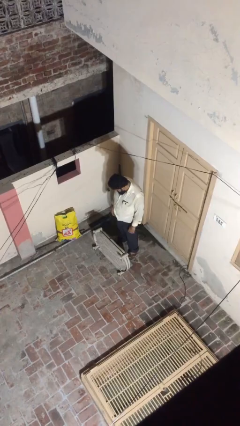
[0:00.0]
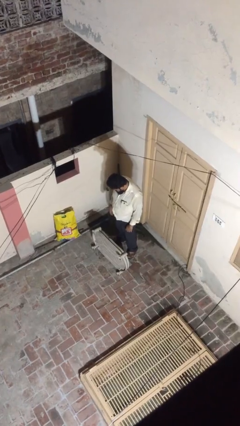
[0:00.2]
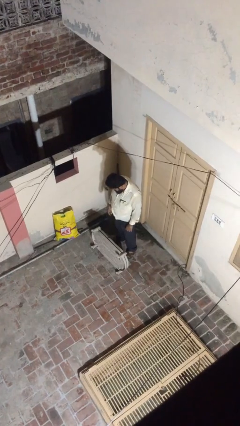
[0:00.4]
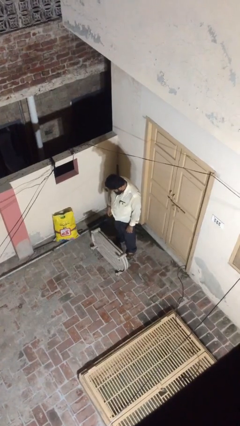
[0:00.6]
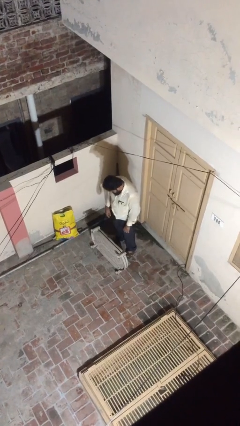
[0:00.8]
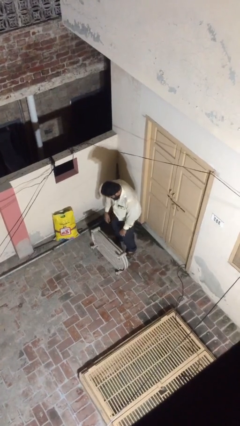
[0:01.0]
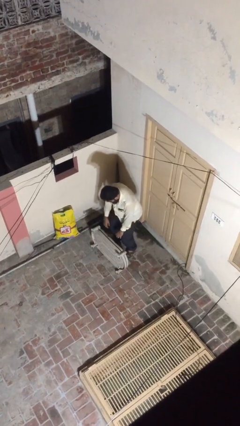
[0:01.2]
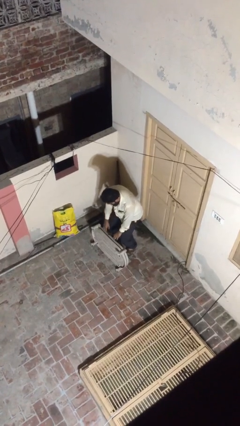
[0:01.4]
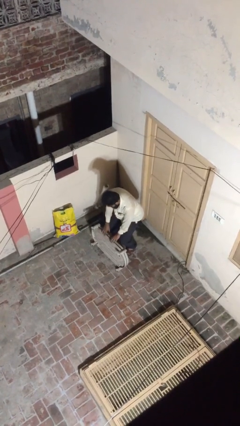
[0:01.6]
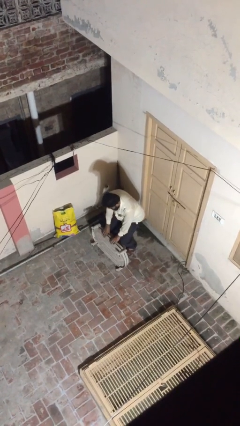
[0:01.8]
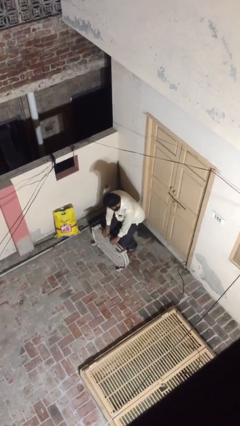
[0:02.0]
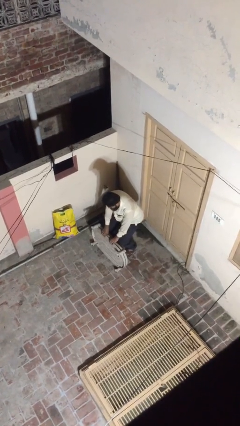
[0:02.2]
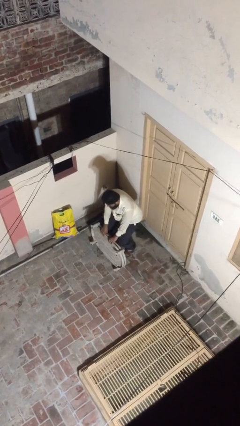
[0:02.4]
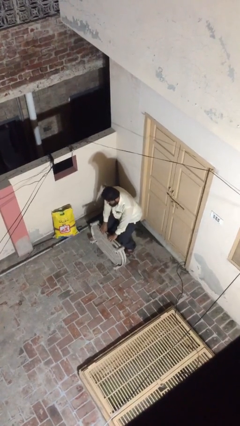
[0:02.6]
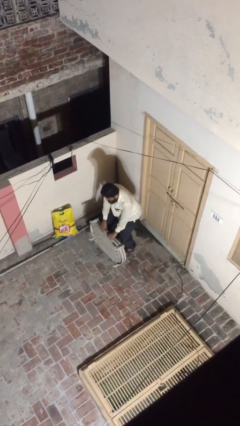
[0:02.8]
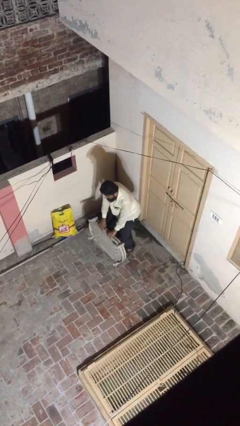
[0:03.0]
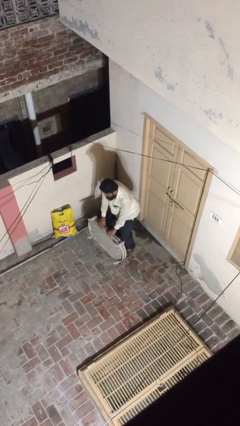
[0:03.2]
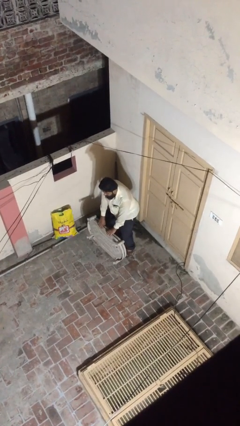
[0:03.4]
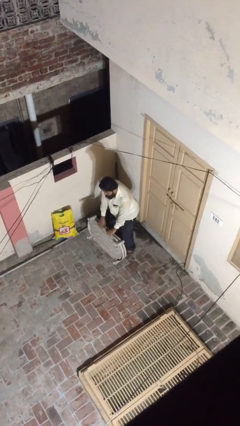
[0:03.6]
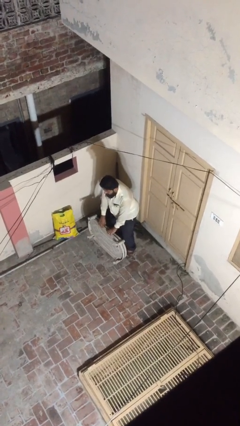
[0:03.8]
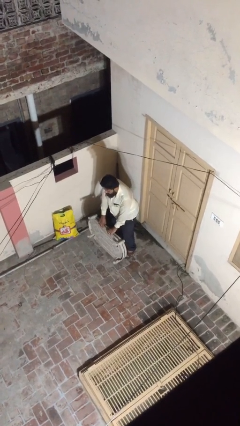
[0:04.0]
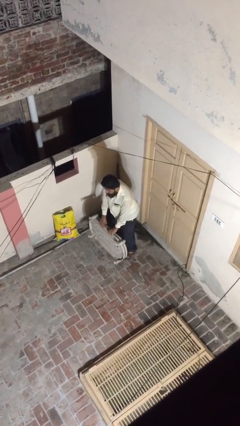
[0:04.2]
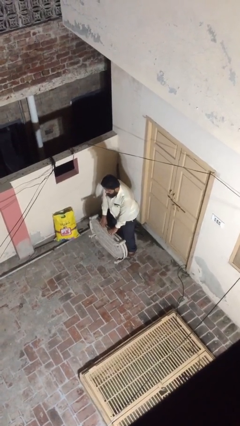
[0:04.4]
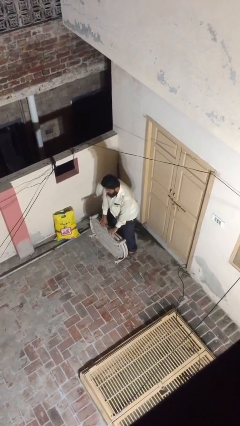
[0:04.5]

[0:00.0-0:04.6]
person picks up object from floor

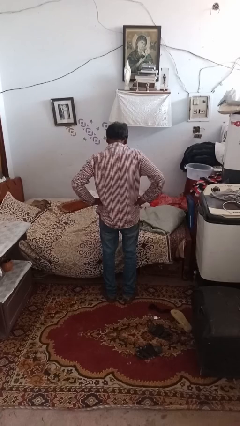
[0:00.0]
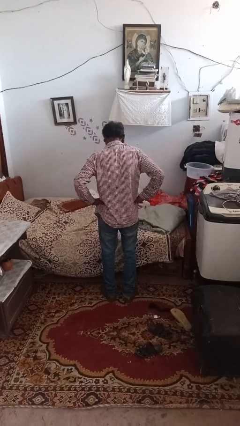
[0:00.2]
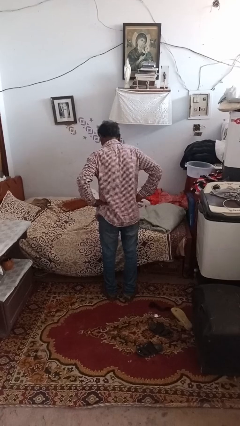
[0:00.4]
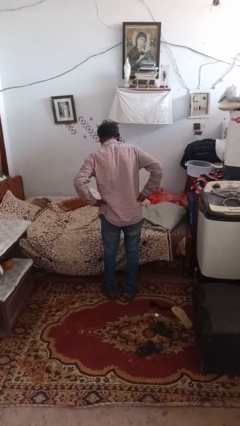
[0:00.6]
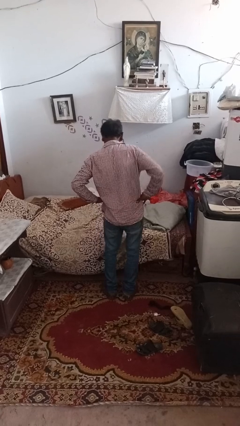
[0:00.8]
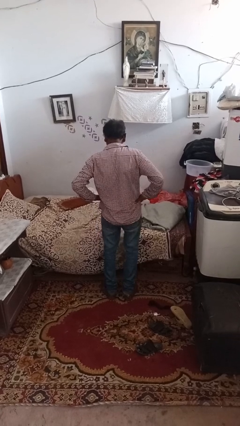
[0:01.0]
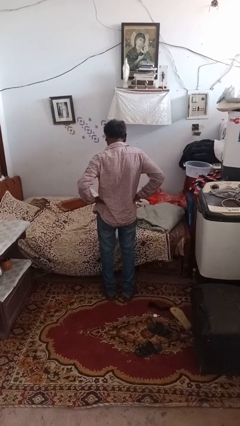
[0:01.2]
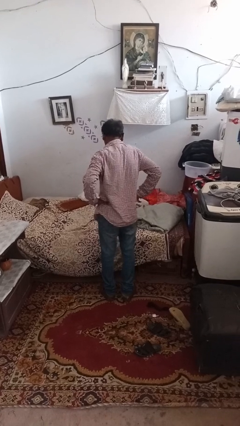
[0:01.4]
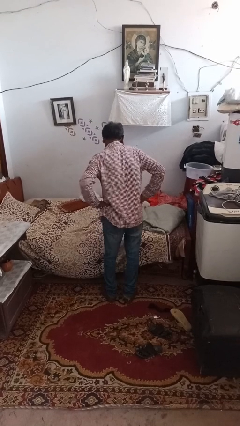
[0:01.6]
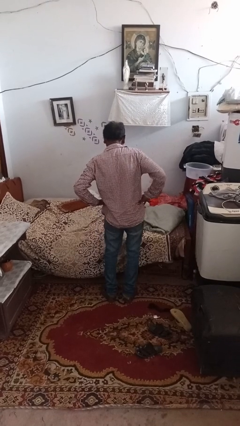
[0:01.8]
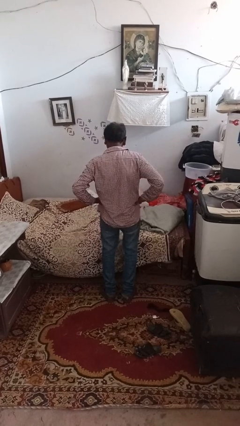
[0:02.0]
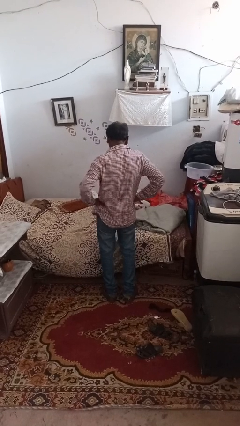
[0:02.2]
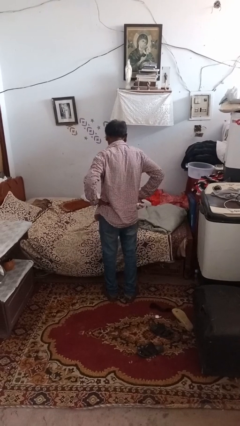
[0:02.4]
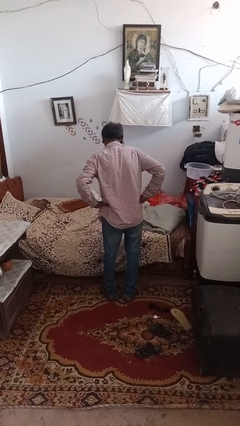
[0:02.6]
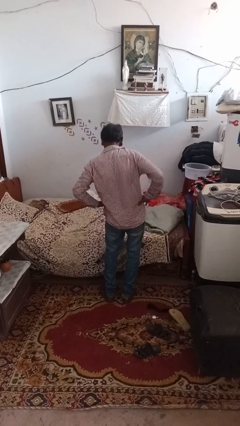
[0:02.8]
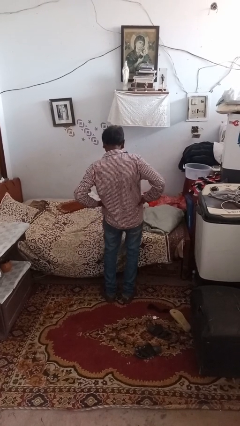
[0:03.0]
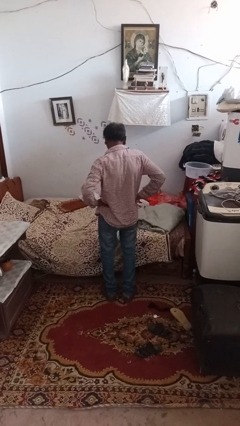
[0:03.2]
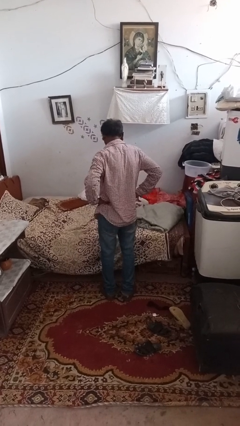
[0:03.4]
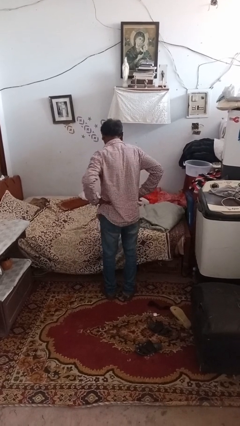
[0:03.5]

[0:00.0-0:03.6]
person wiggles hips

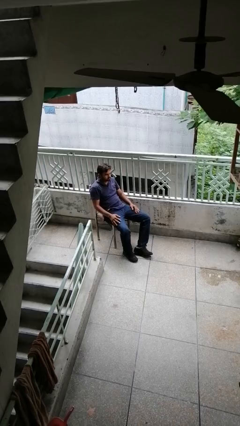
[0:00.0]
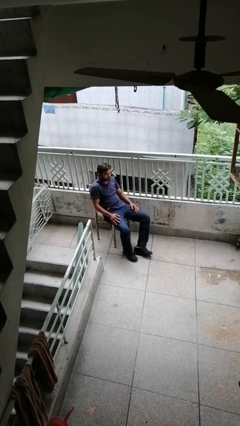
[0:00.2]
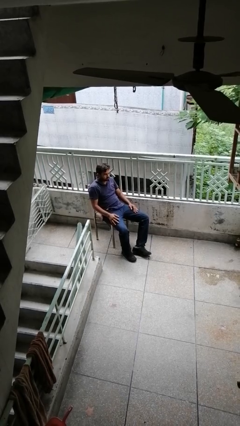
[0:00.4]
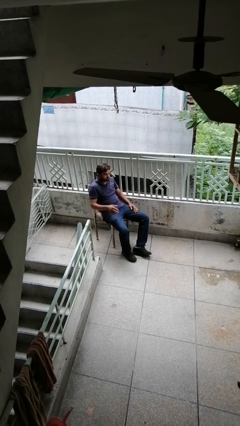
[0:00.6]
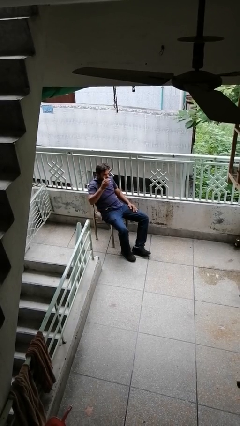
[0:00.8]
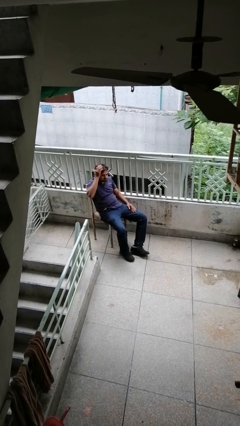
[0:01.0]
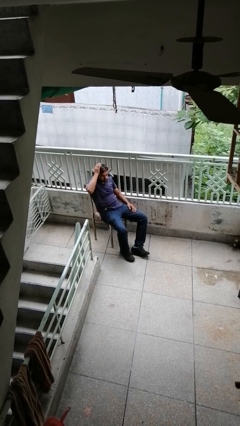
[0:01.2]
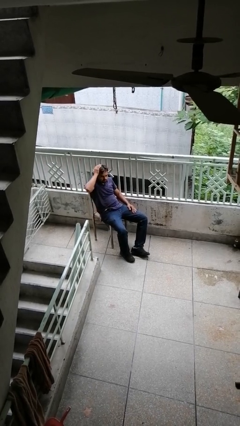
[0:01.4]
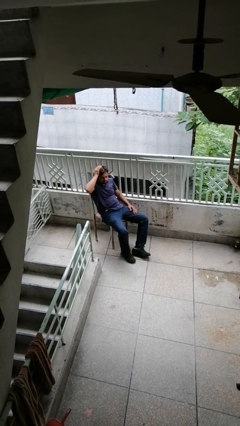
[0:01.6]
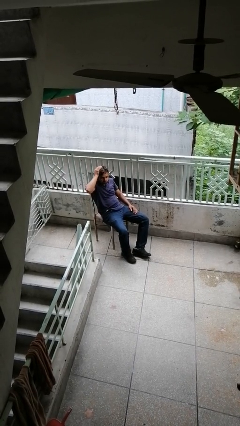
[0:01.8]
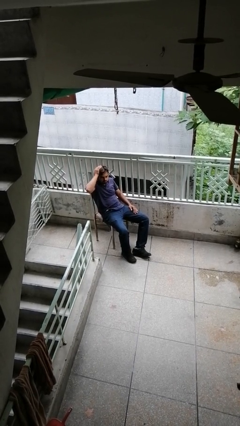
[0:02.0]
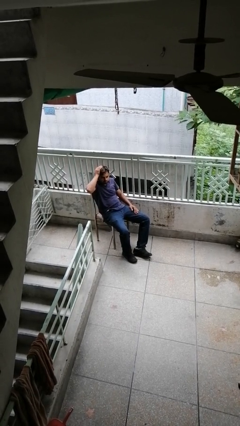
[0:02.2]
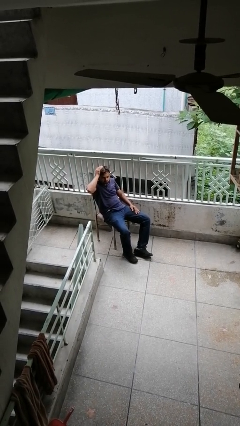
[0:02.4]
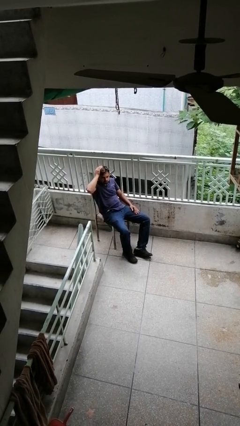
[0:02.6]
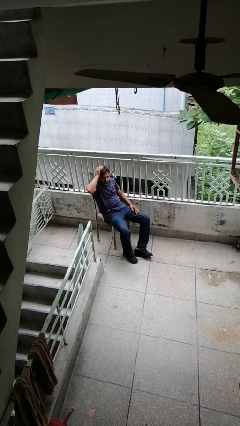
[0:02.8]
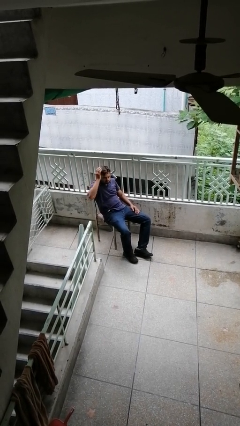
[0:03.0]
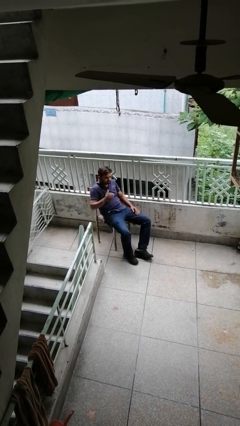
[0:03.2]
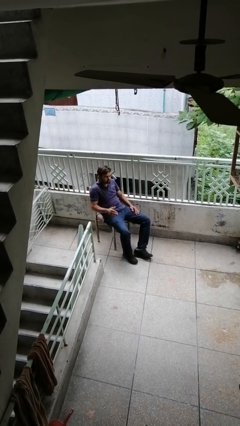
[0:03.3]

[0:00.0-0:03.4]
person pats head

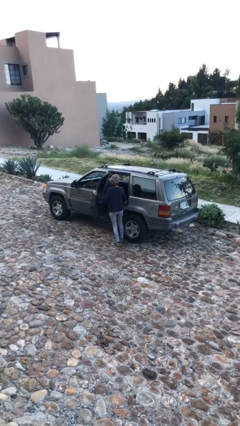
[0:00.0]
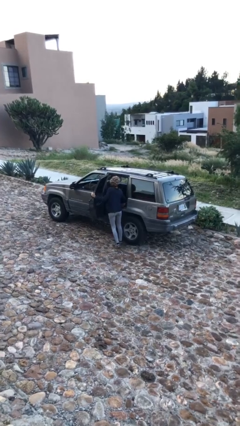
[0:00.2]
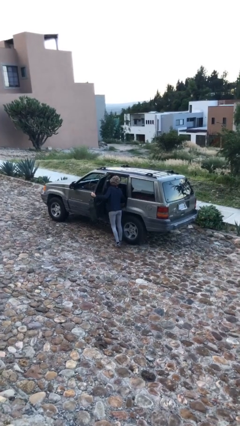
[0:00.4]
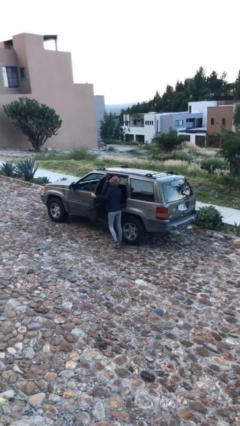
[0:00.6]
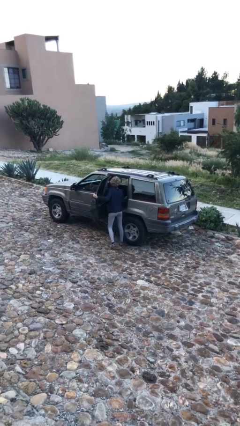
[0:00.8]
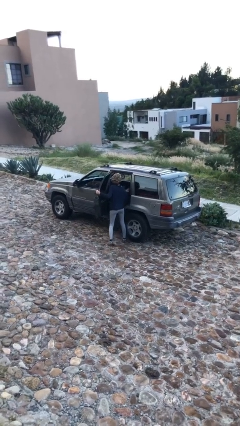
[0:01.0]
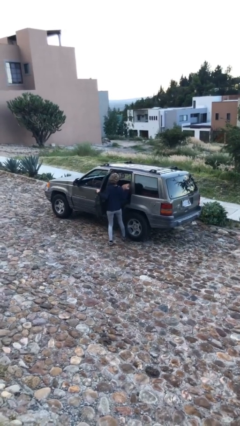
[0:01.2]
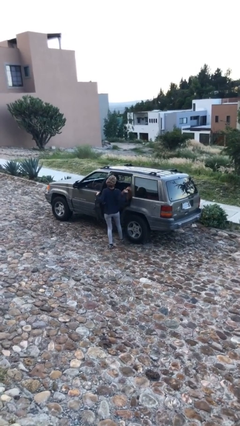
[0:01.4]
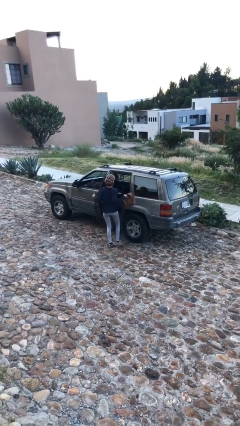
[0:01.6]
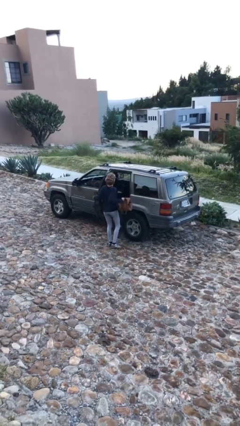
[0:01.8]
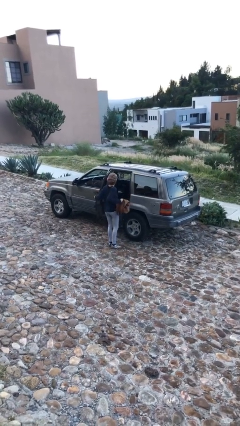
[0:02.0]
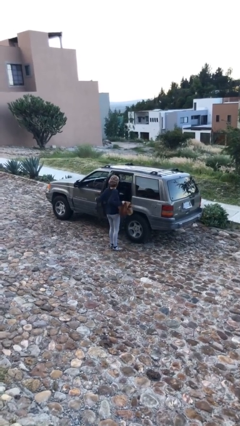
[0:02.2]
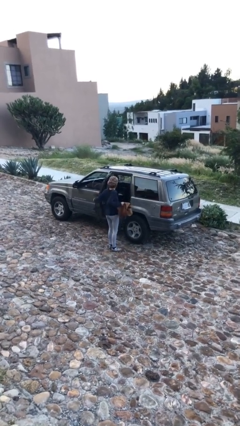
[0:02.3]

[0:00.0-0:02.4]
person unloads car

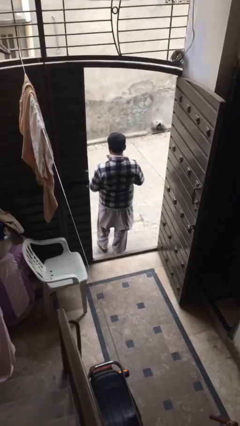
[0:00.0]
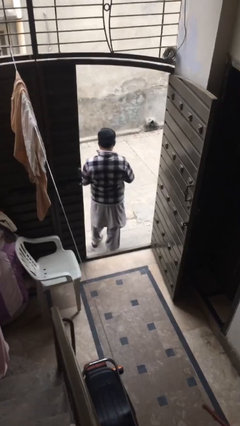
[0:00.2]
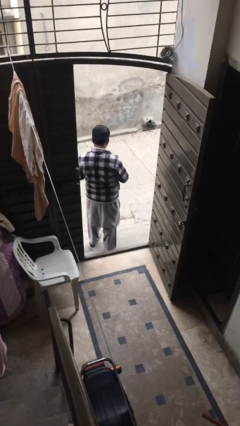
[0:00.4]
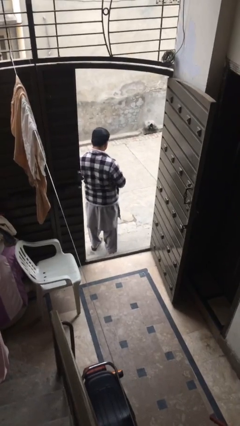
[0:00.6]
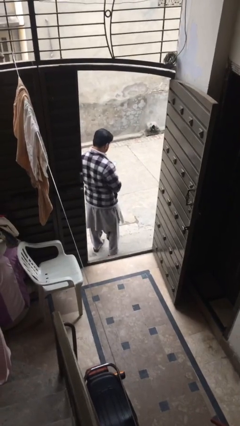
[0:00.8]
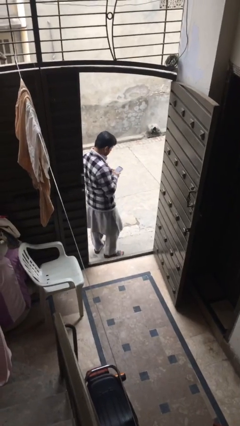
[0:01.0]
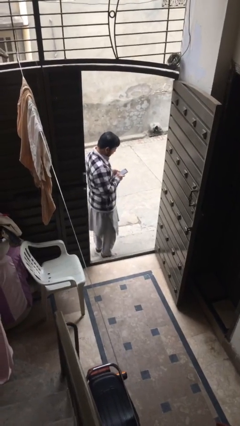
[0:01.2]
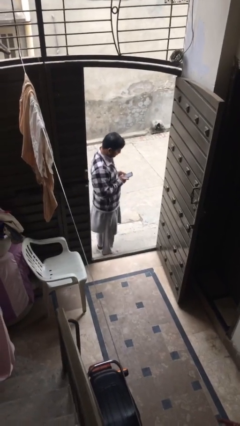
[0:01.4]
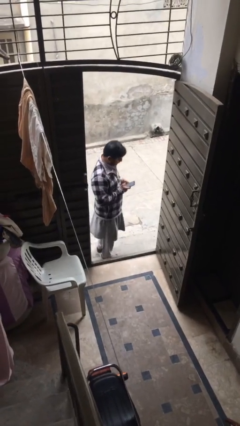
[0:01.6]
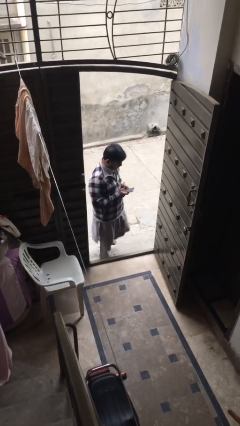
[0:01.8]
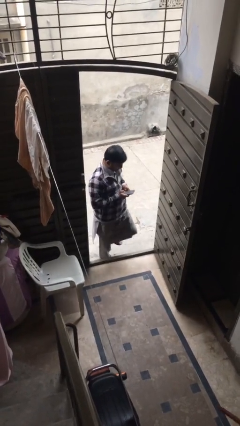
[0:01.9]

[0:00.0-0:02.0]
person enters scene through structure

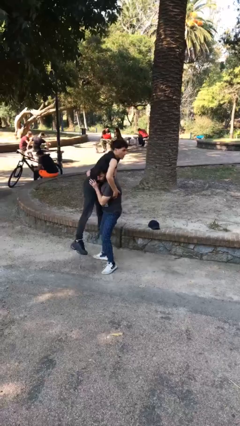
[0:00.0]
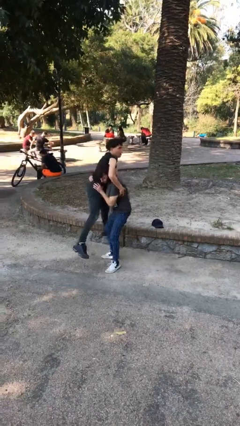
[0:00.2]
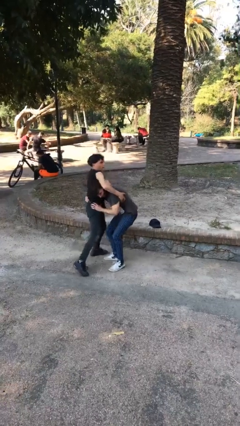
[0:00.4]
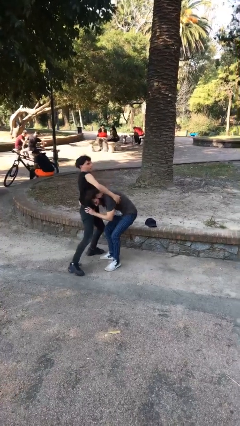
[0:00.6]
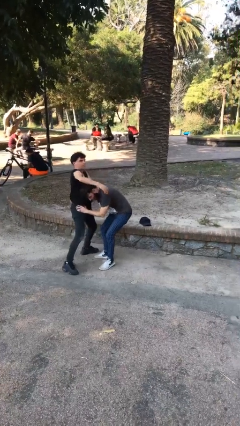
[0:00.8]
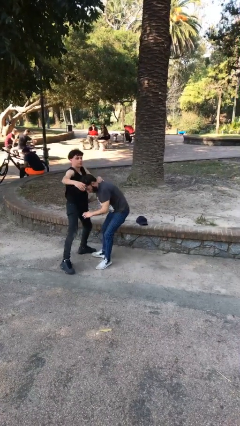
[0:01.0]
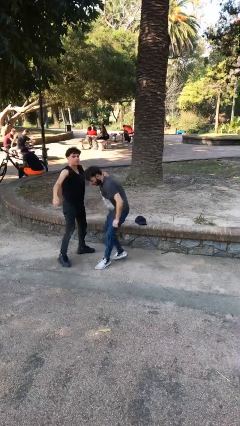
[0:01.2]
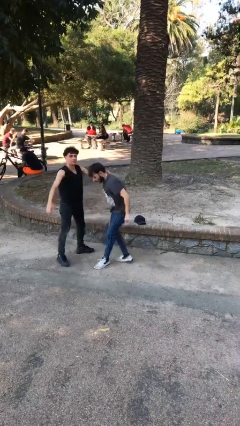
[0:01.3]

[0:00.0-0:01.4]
person puts down person
